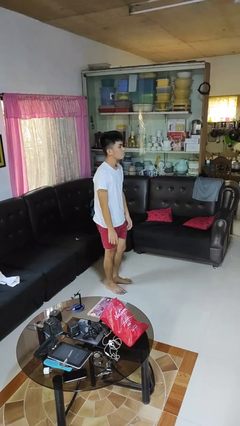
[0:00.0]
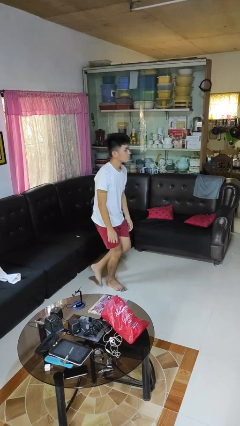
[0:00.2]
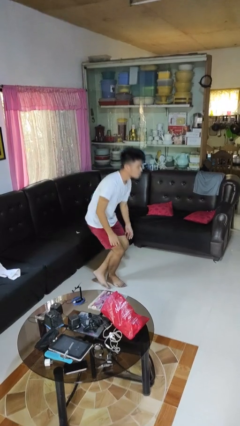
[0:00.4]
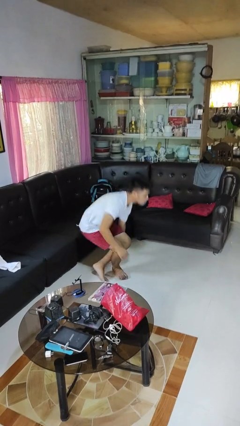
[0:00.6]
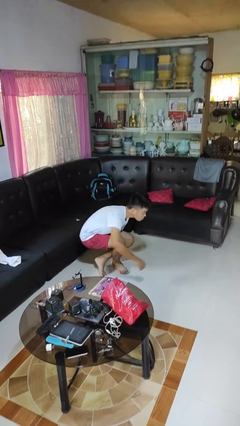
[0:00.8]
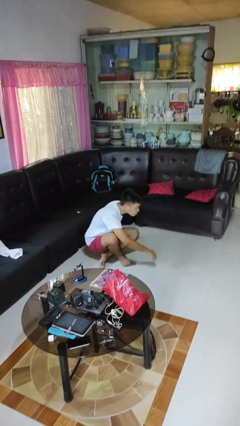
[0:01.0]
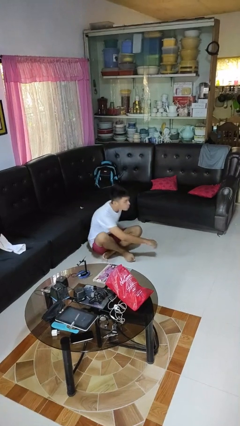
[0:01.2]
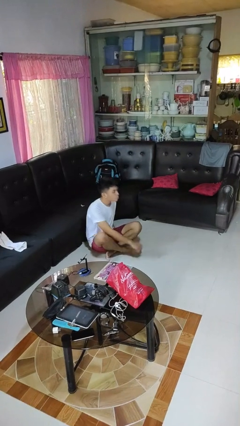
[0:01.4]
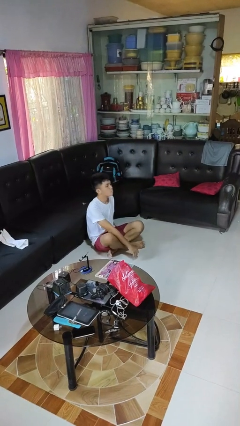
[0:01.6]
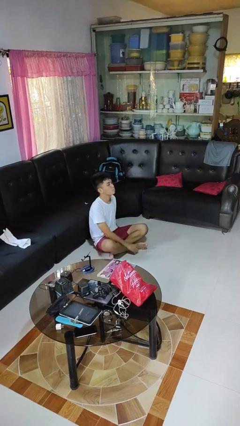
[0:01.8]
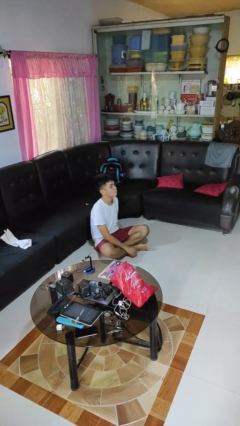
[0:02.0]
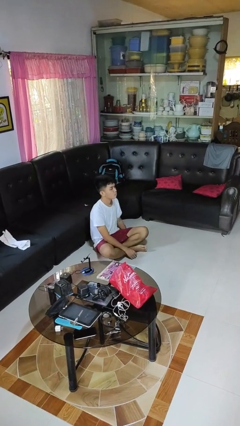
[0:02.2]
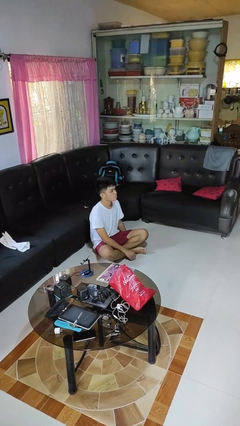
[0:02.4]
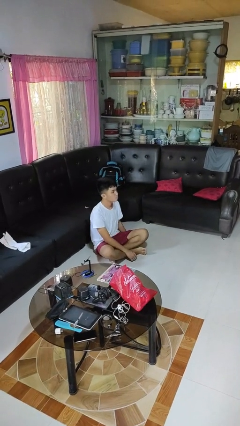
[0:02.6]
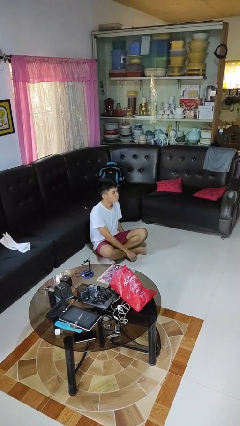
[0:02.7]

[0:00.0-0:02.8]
person sits crisscross

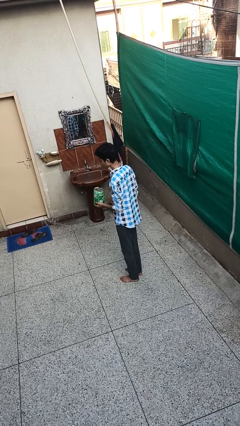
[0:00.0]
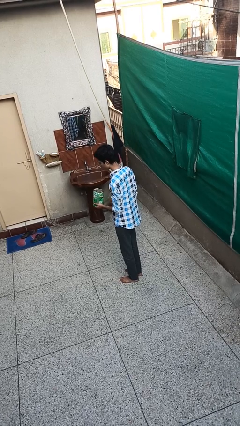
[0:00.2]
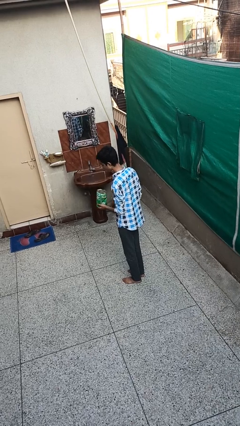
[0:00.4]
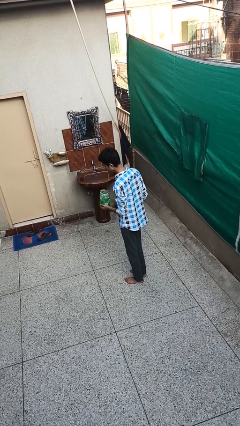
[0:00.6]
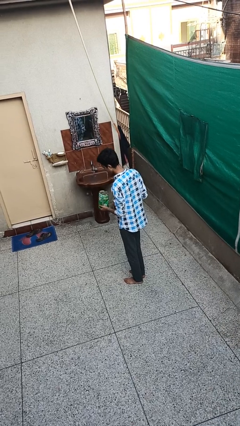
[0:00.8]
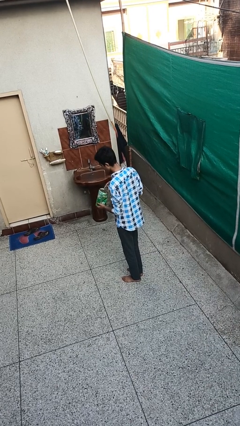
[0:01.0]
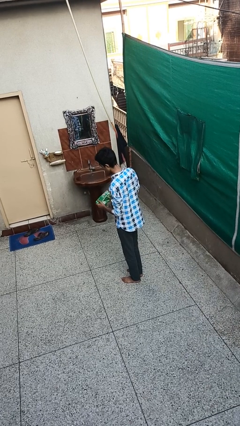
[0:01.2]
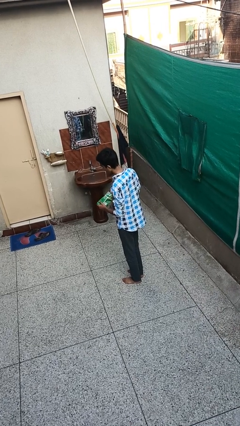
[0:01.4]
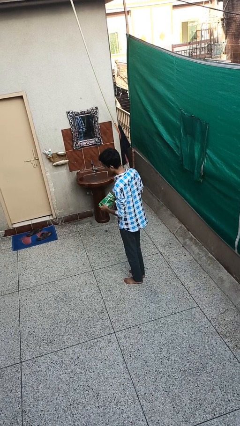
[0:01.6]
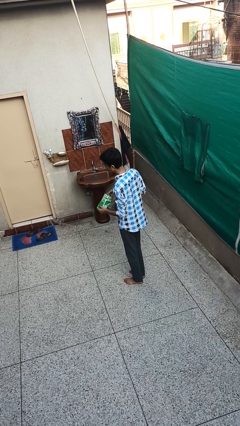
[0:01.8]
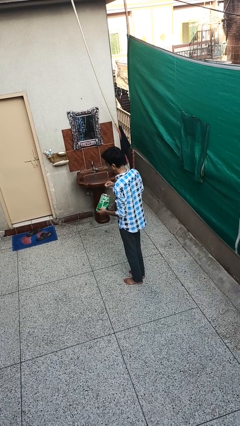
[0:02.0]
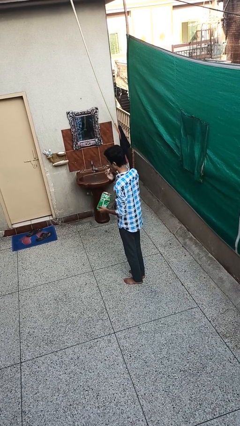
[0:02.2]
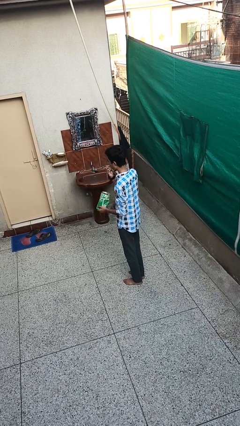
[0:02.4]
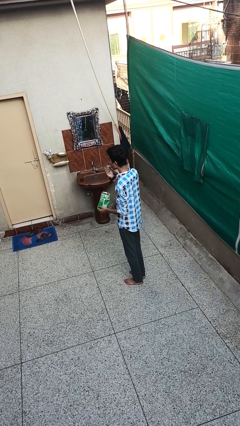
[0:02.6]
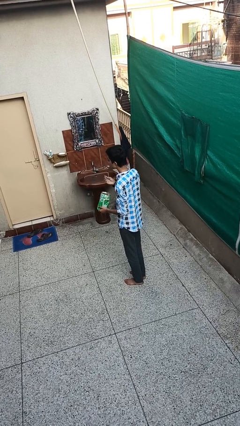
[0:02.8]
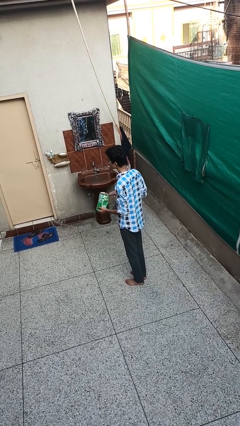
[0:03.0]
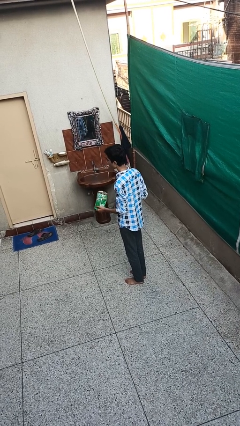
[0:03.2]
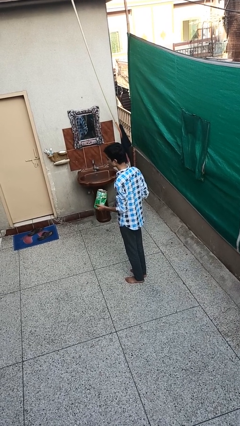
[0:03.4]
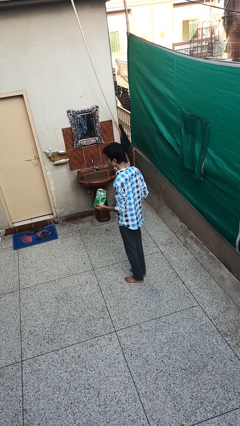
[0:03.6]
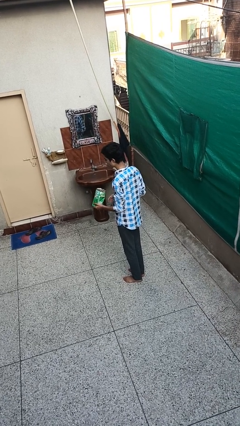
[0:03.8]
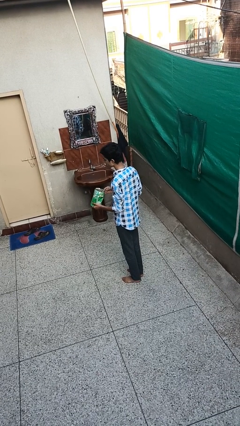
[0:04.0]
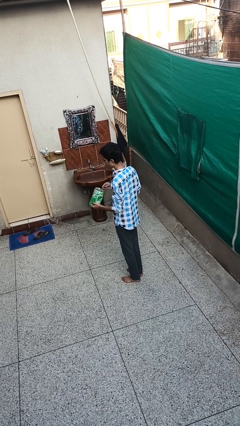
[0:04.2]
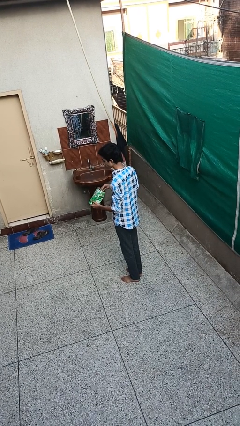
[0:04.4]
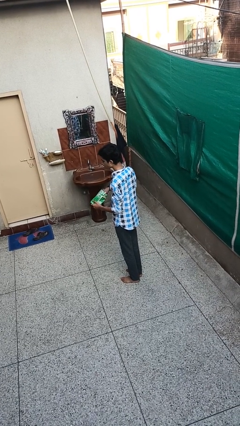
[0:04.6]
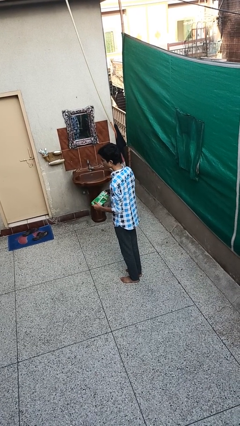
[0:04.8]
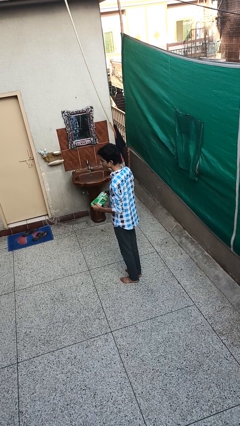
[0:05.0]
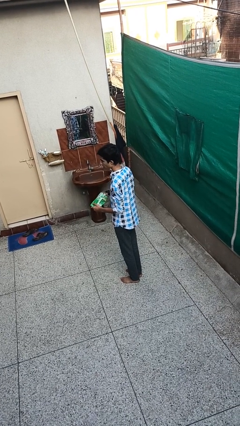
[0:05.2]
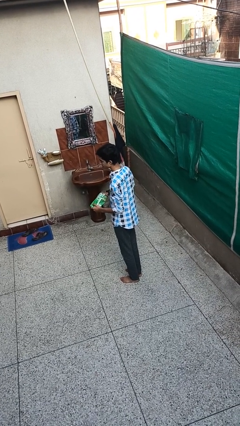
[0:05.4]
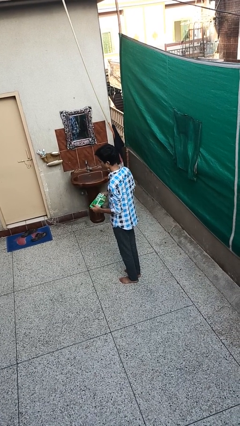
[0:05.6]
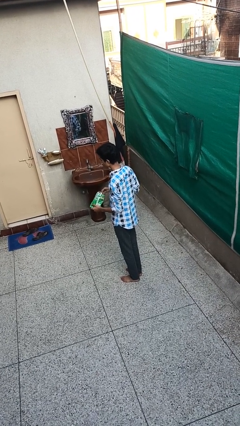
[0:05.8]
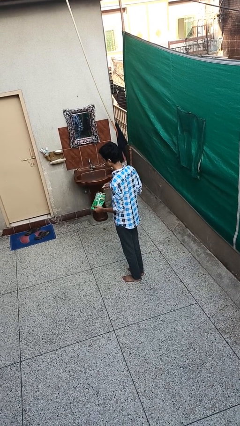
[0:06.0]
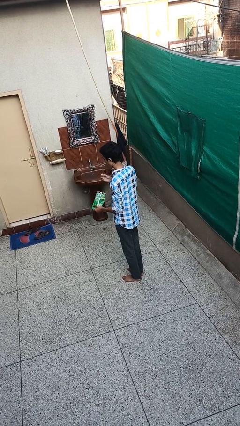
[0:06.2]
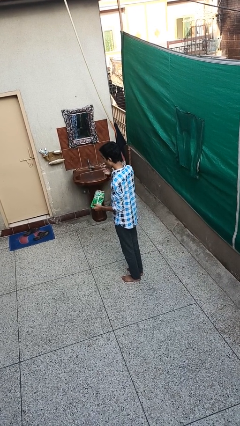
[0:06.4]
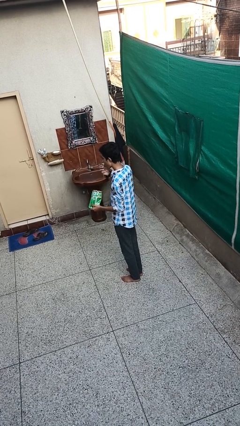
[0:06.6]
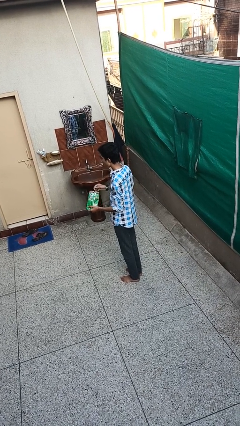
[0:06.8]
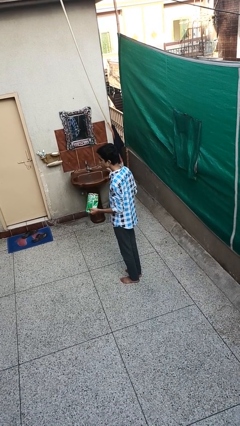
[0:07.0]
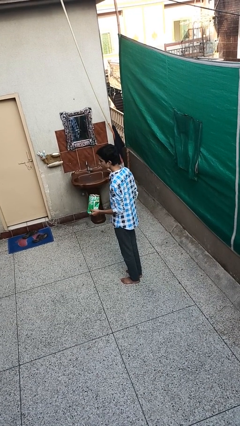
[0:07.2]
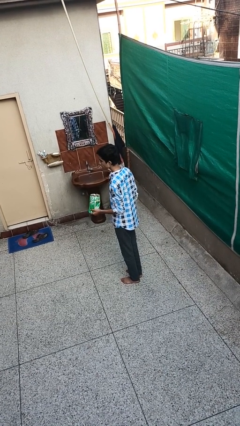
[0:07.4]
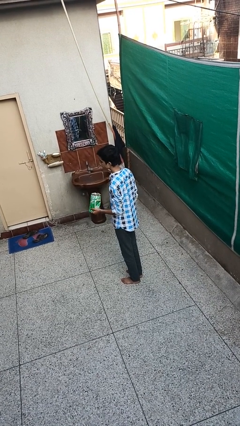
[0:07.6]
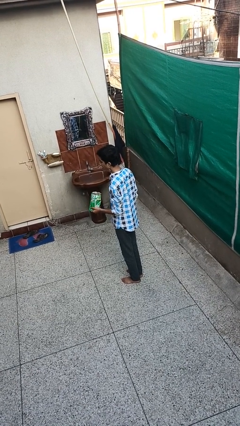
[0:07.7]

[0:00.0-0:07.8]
person eats snack from bag

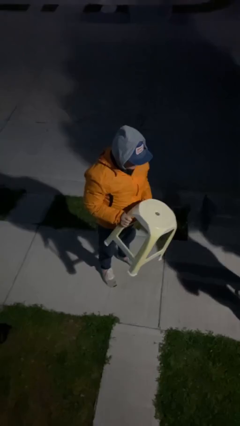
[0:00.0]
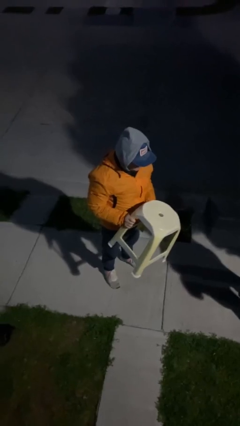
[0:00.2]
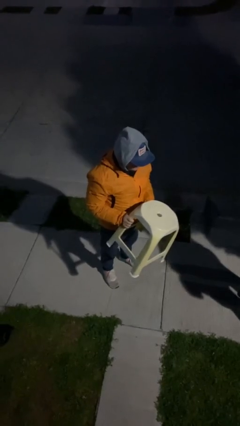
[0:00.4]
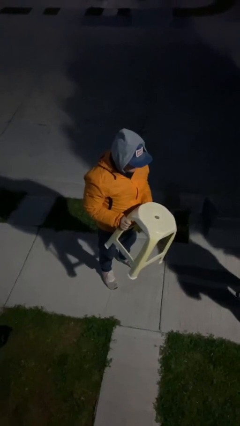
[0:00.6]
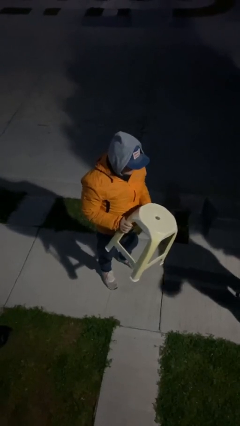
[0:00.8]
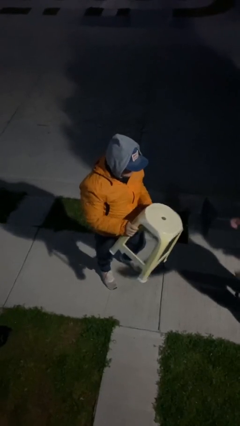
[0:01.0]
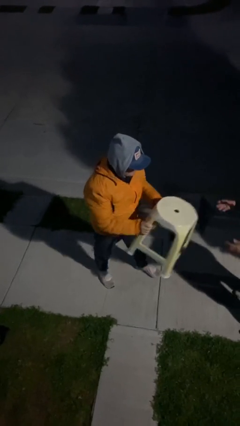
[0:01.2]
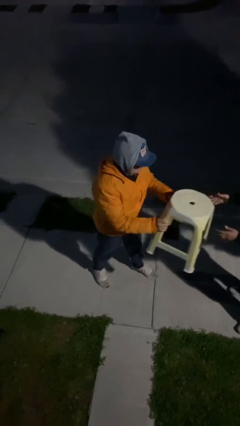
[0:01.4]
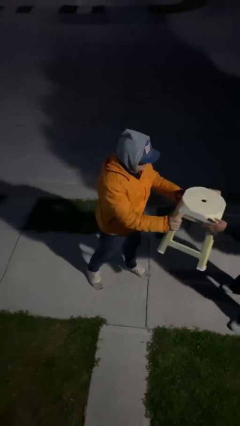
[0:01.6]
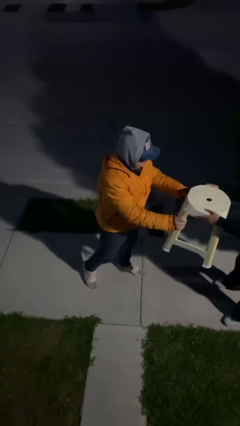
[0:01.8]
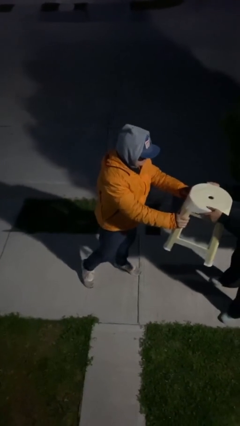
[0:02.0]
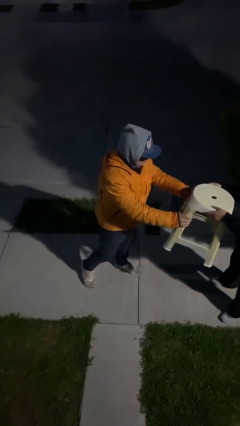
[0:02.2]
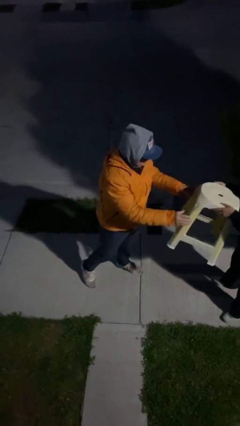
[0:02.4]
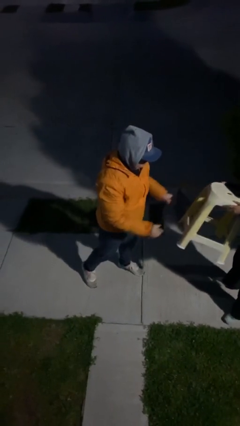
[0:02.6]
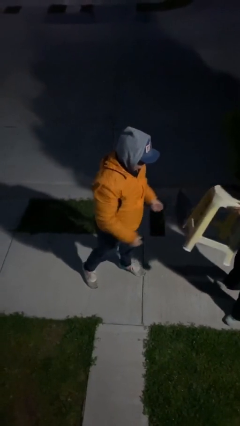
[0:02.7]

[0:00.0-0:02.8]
person transfers object to person

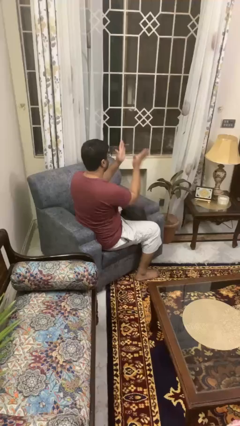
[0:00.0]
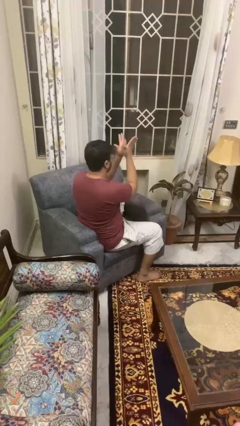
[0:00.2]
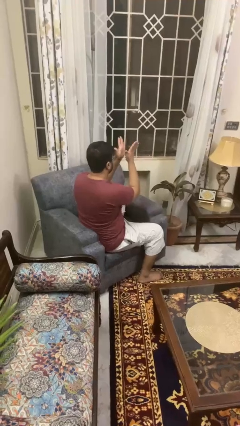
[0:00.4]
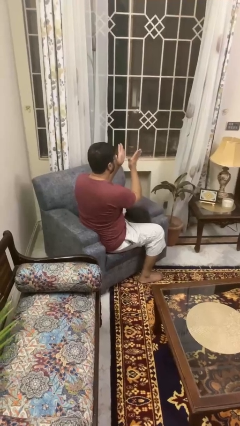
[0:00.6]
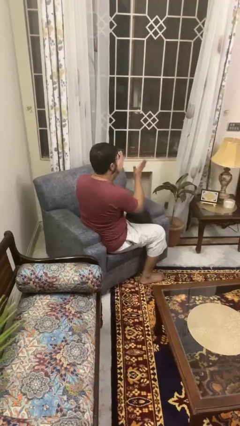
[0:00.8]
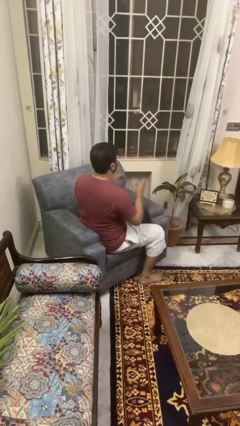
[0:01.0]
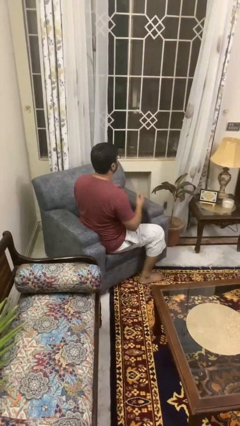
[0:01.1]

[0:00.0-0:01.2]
person swats bug

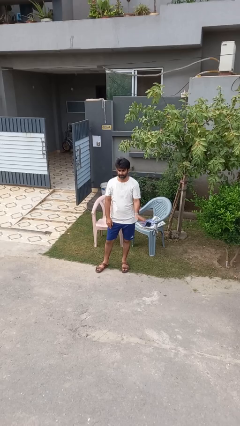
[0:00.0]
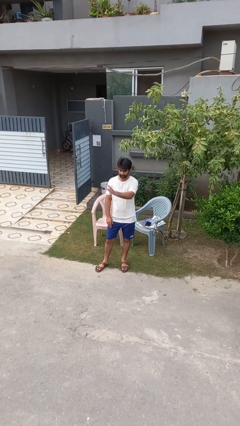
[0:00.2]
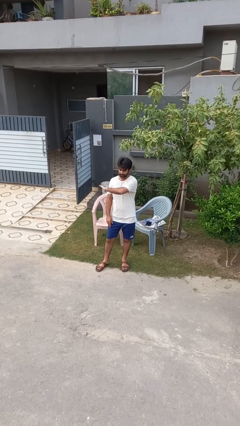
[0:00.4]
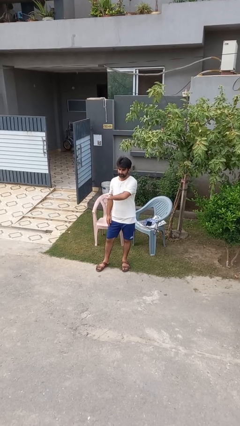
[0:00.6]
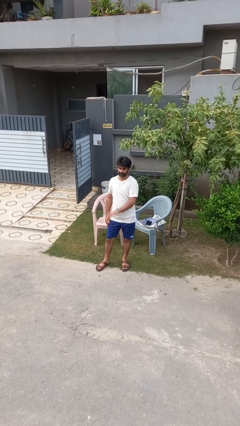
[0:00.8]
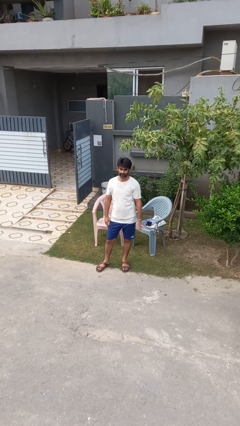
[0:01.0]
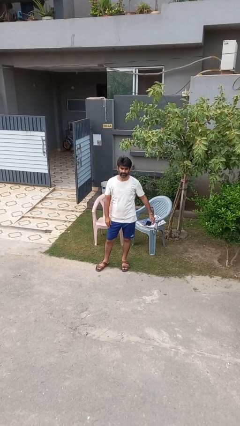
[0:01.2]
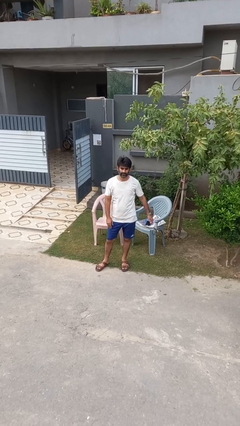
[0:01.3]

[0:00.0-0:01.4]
person gestures swipe right

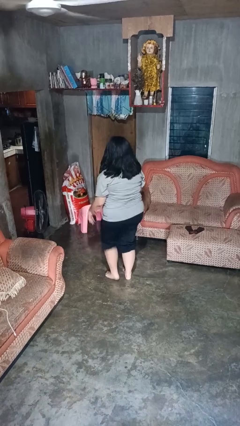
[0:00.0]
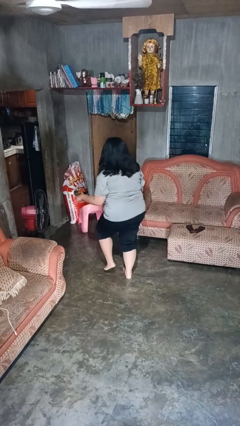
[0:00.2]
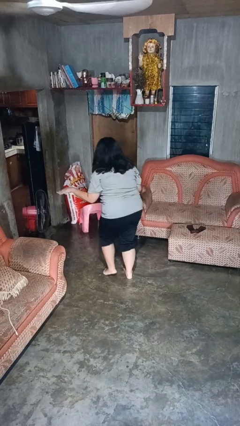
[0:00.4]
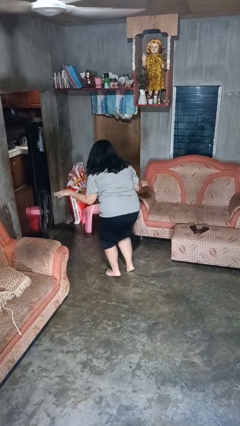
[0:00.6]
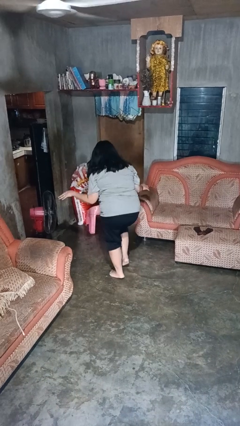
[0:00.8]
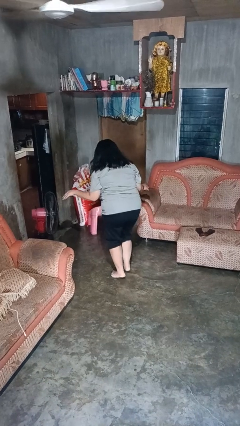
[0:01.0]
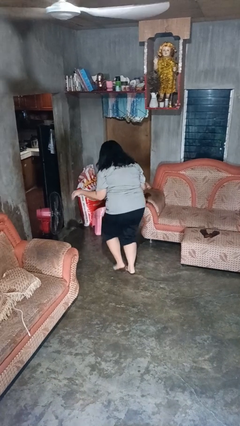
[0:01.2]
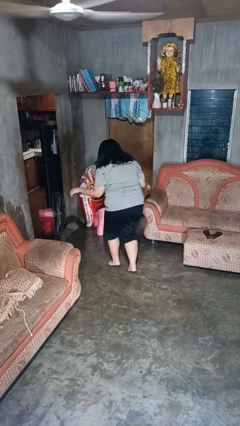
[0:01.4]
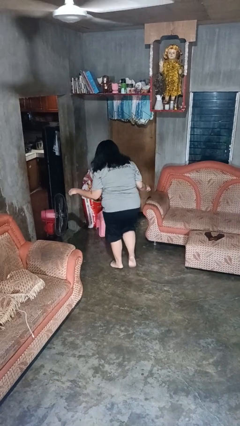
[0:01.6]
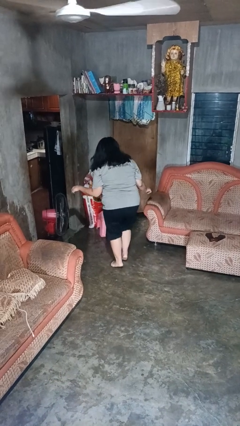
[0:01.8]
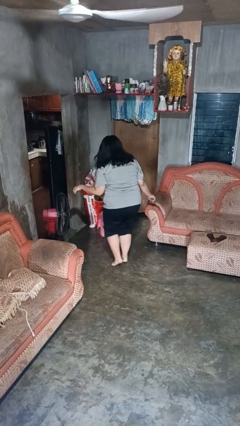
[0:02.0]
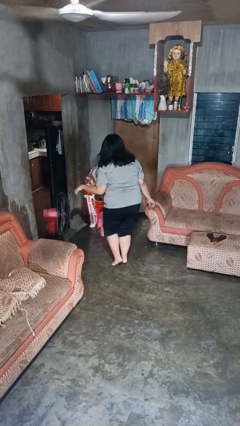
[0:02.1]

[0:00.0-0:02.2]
person walks tiptoe
